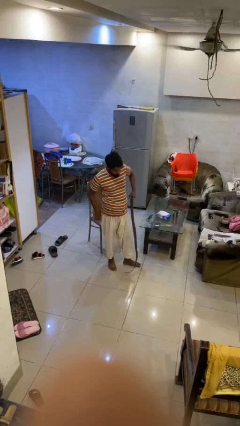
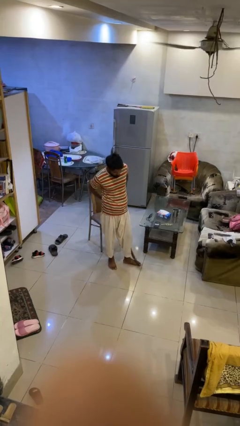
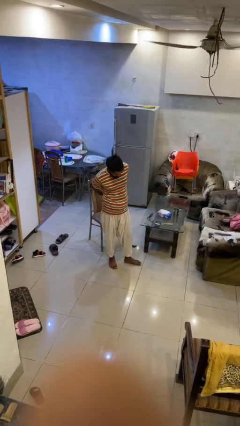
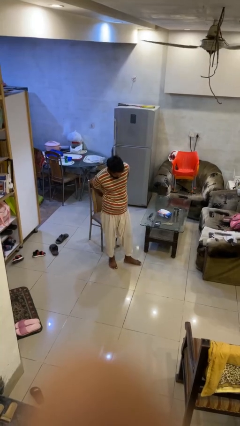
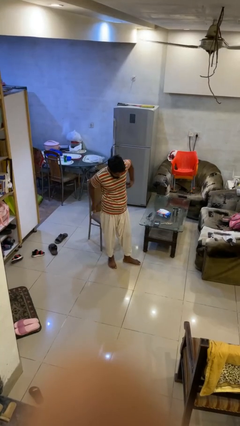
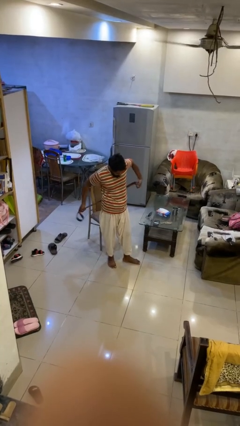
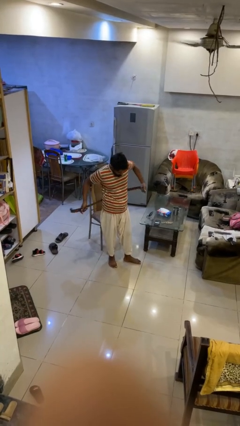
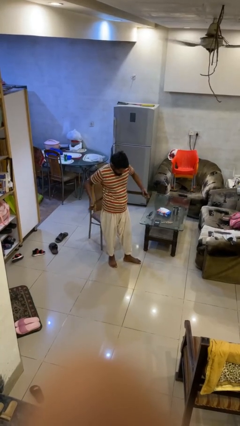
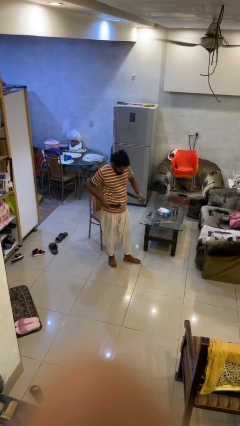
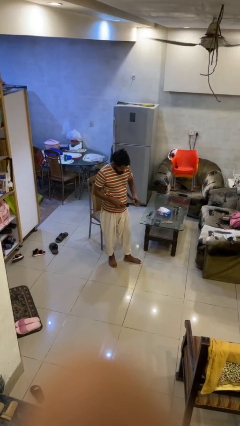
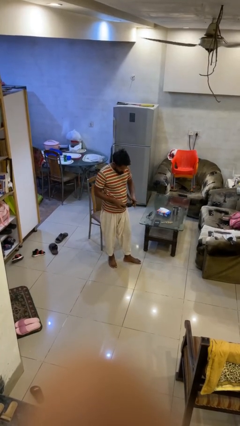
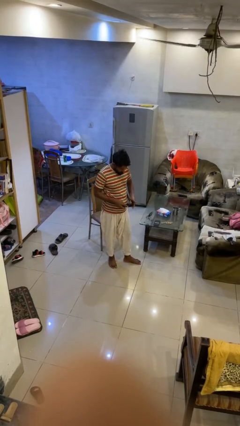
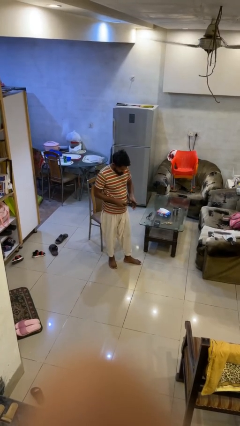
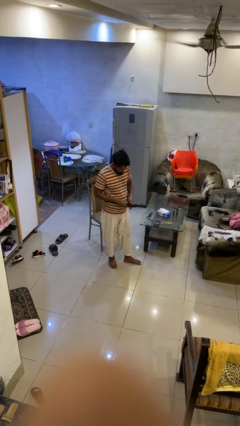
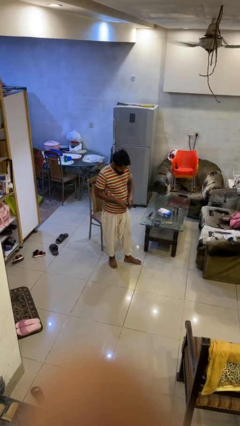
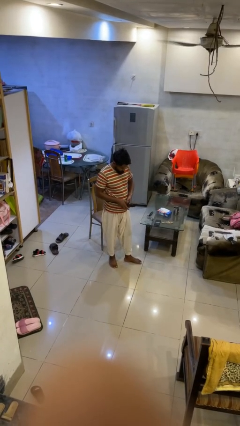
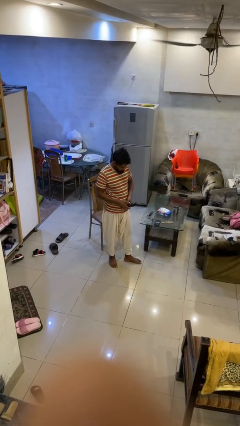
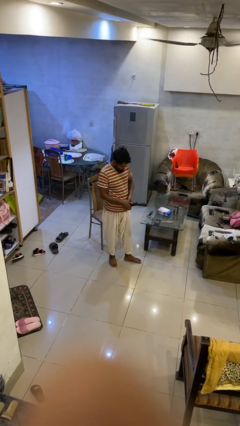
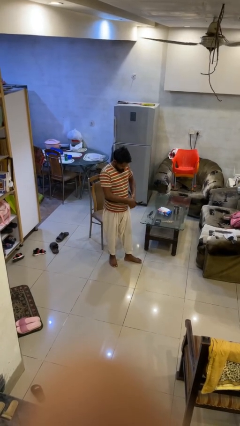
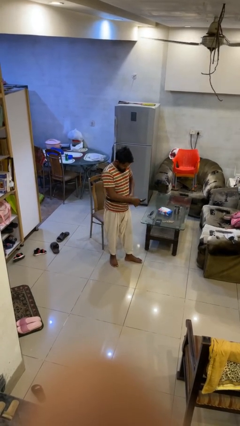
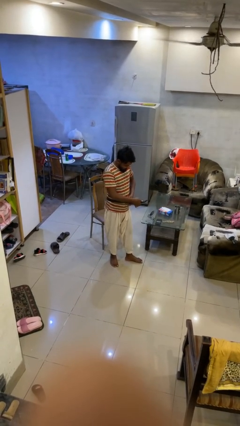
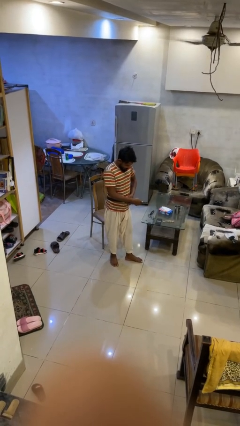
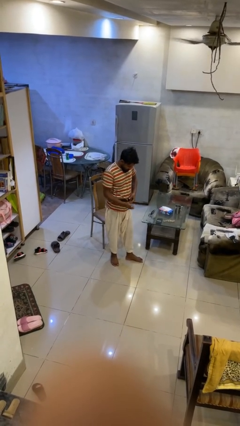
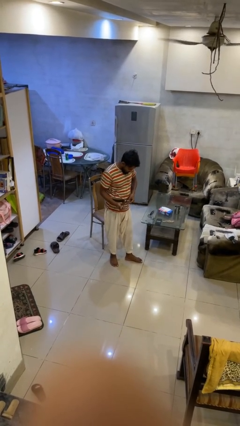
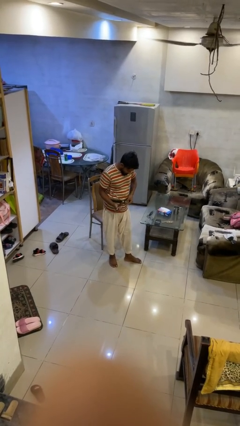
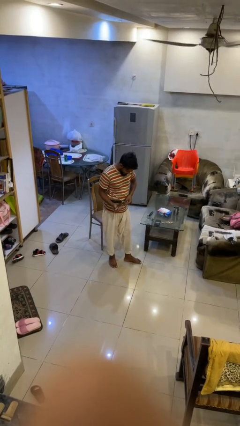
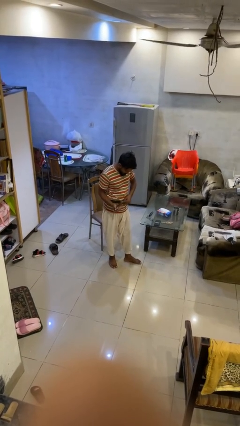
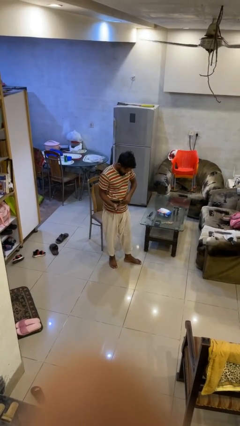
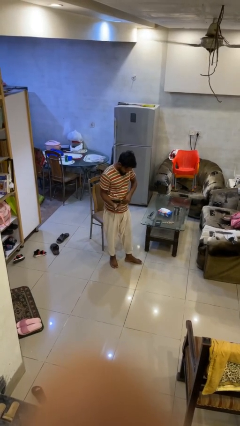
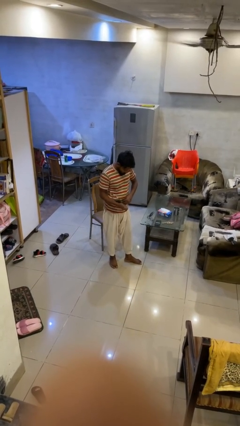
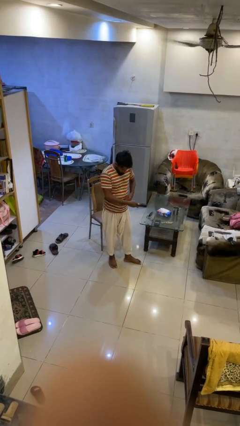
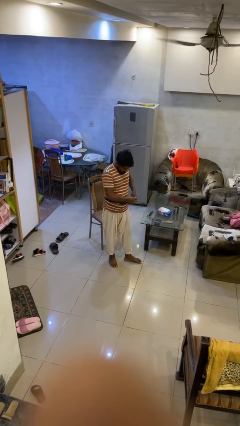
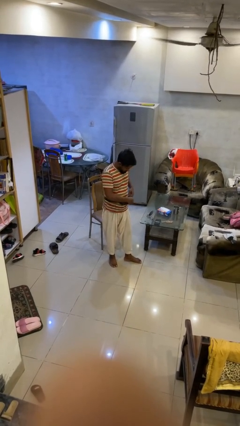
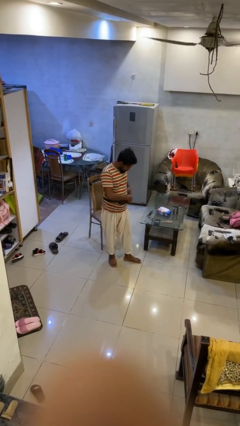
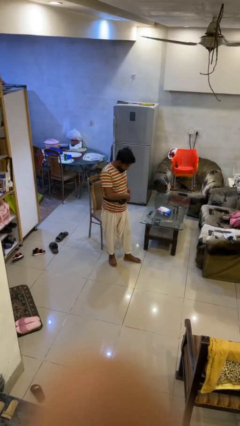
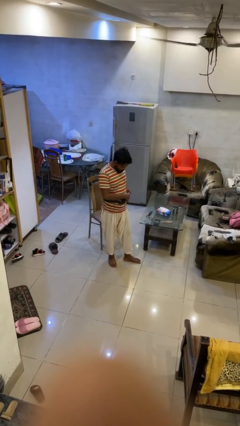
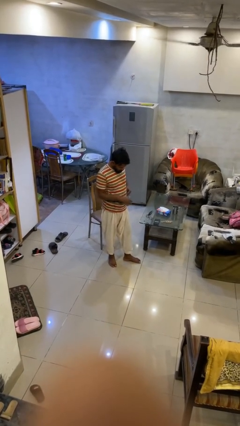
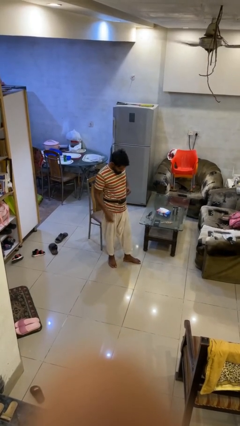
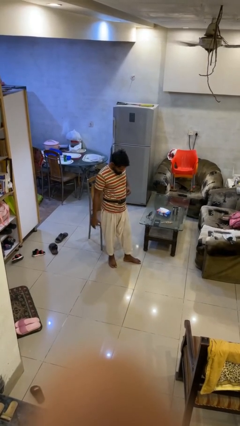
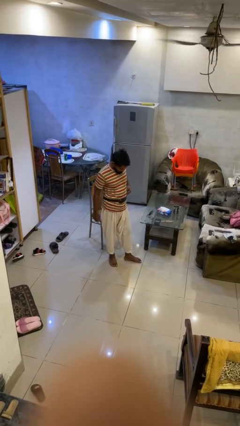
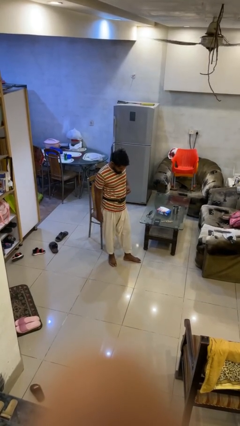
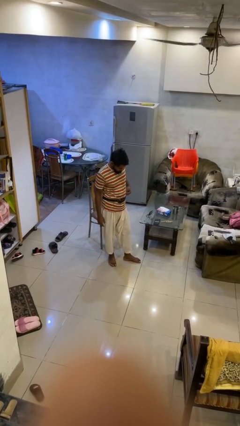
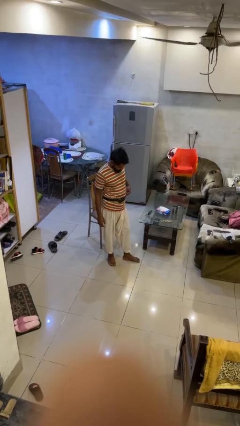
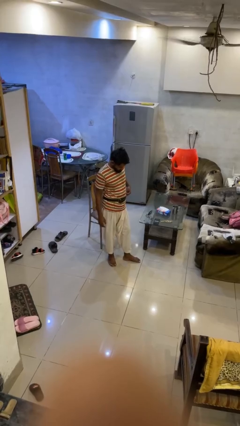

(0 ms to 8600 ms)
person puts on belt

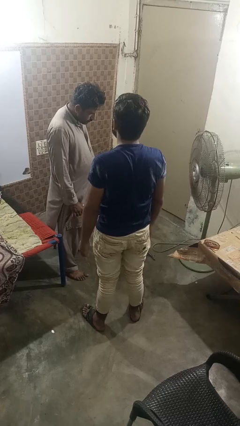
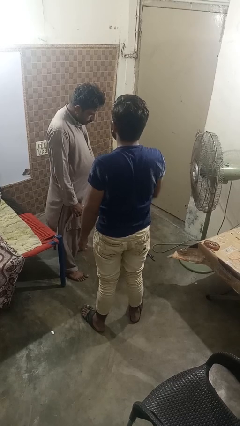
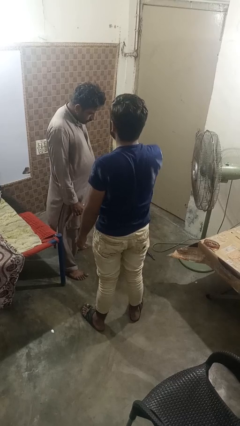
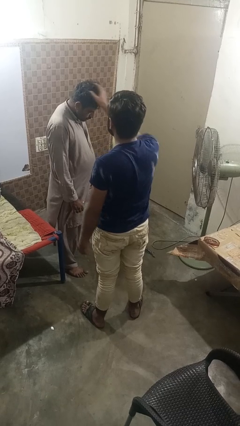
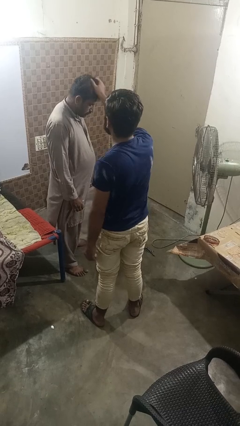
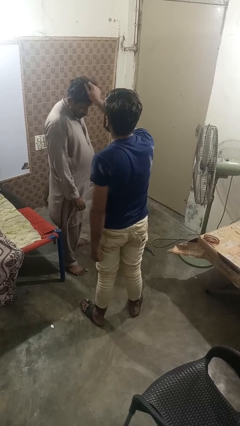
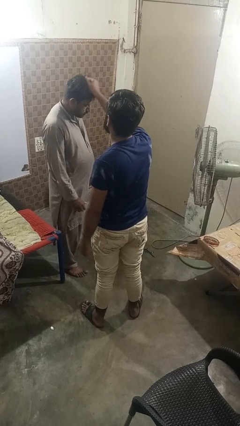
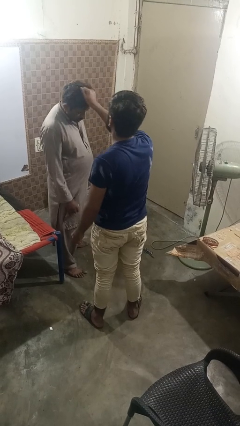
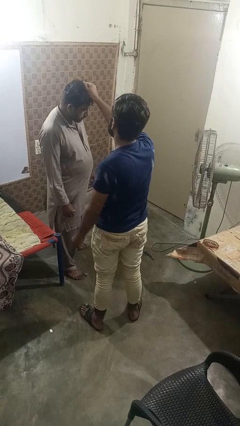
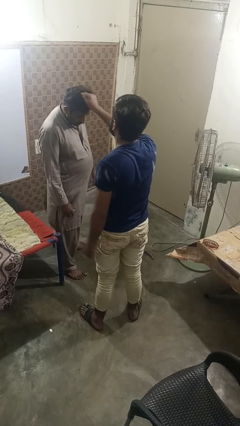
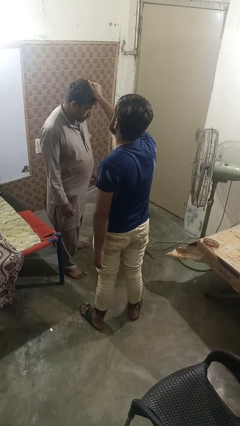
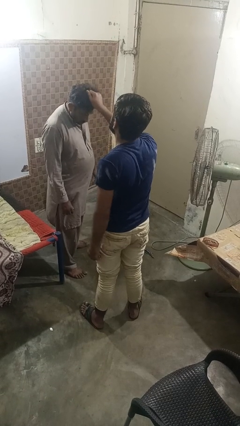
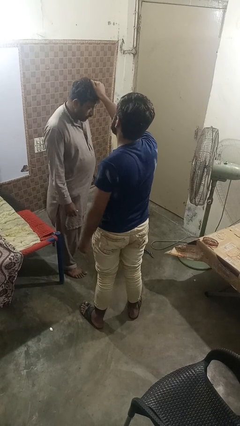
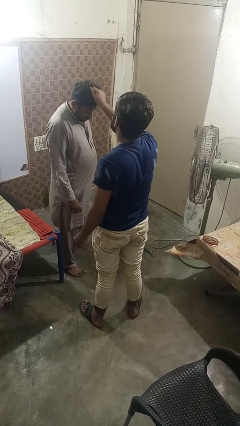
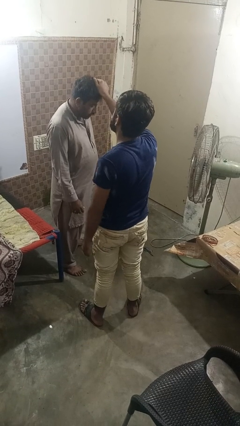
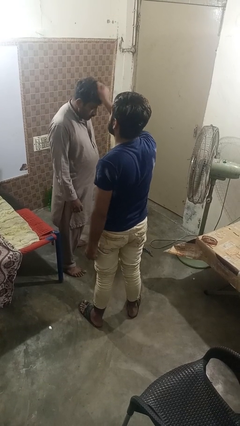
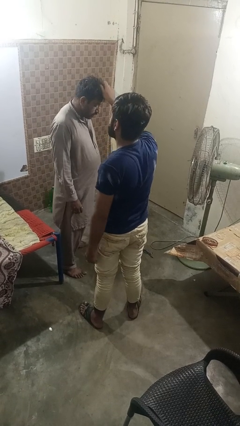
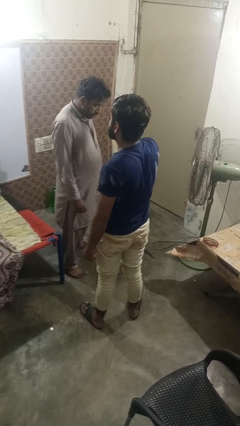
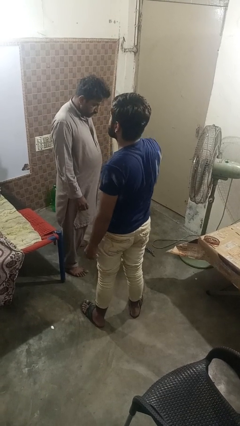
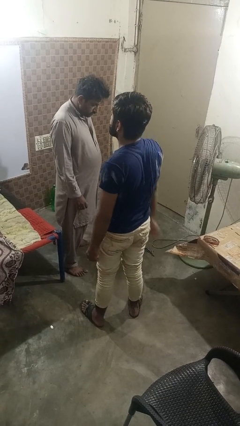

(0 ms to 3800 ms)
person grabs person by hair

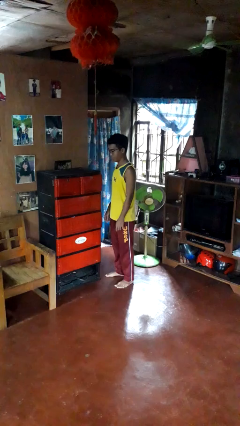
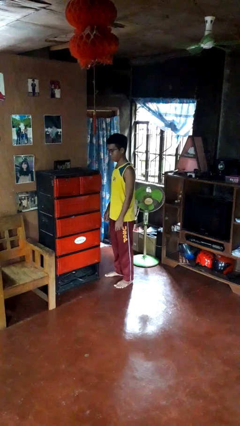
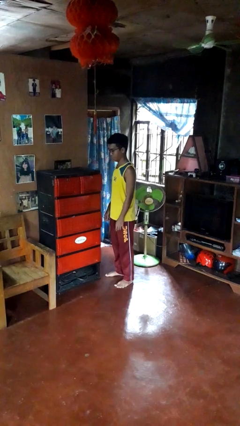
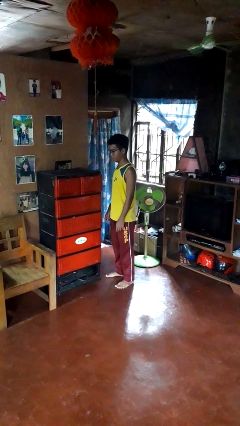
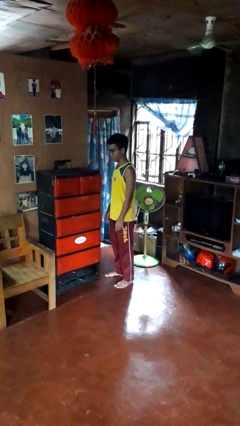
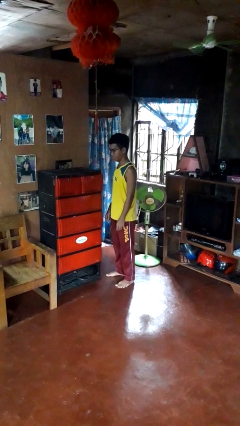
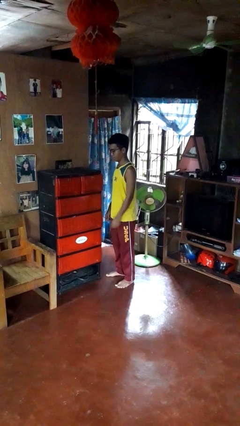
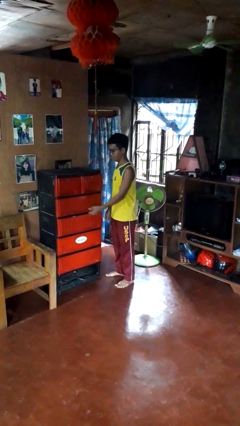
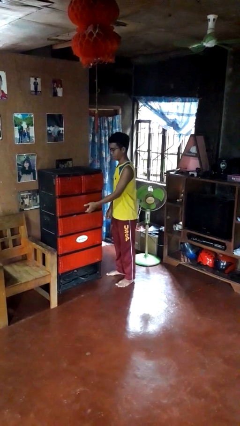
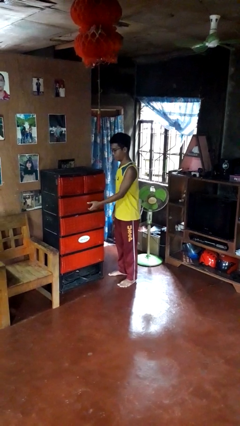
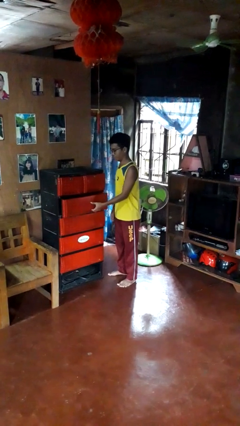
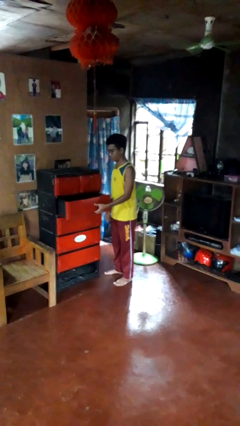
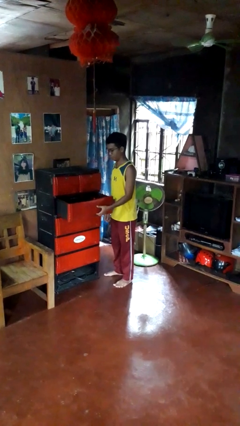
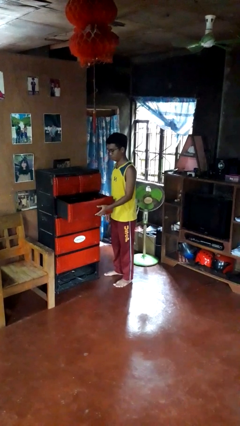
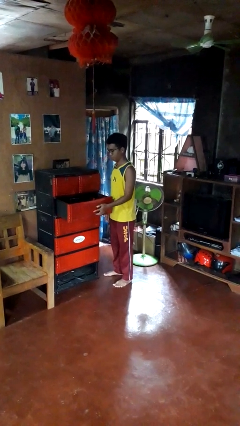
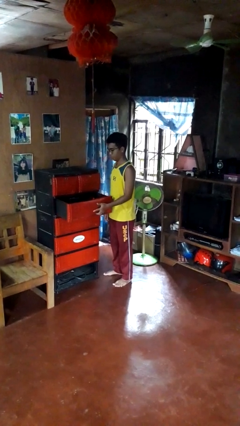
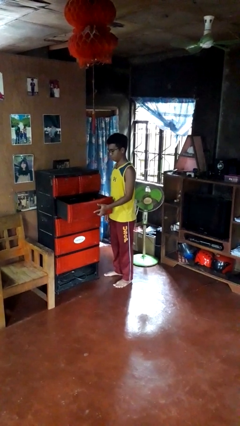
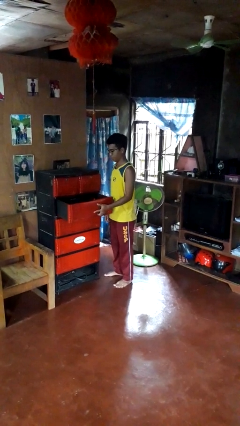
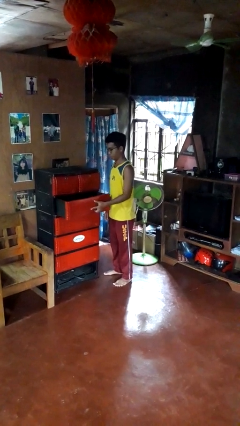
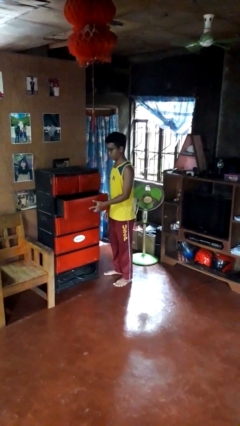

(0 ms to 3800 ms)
person opens dresser drawer

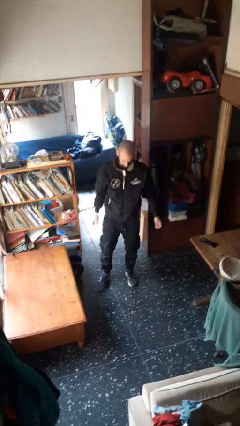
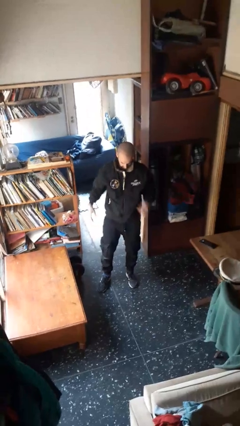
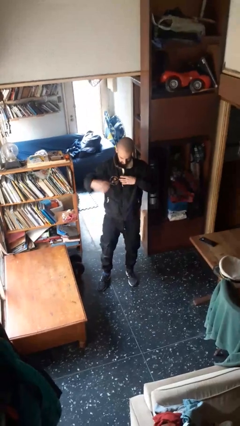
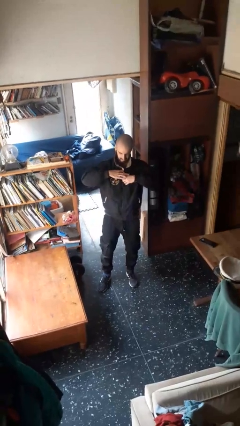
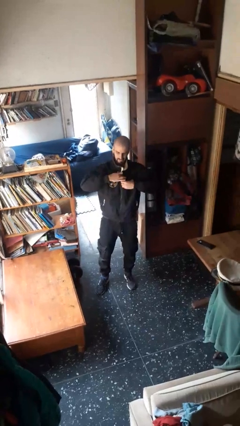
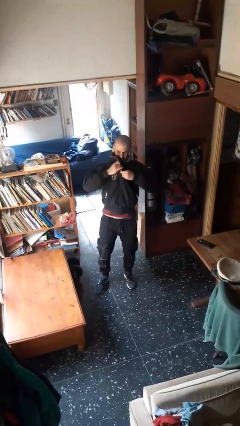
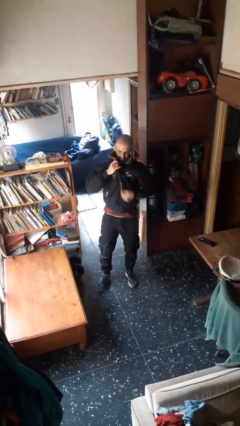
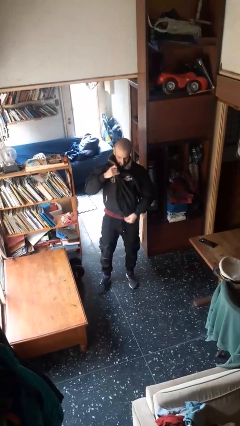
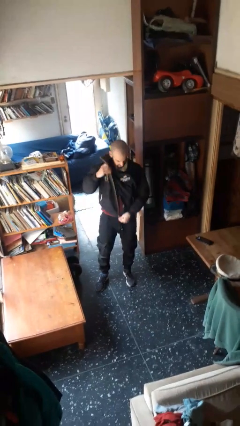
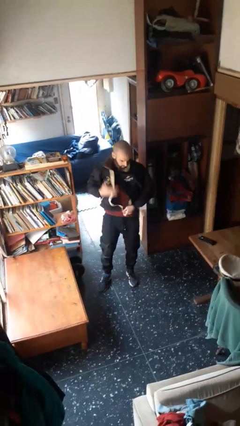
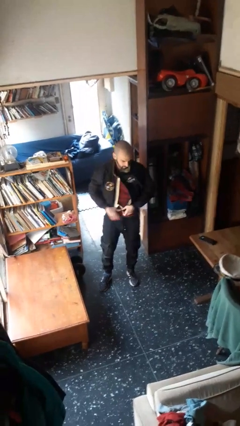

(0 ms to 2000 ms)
person unzips jacket
